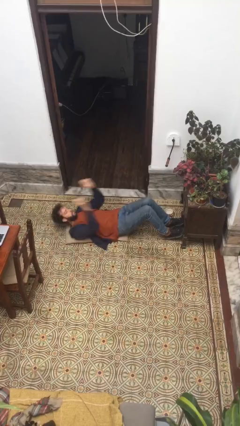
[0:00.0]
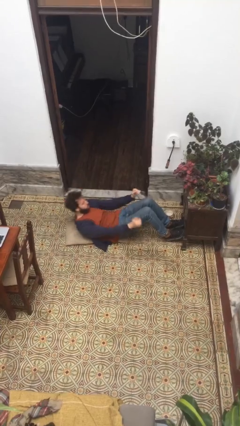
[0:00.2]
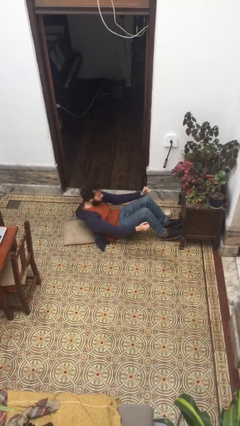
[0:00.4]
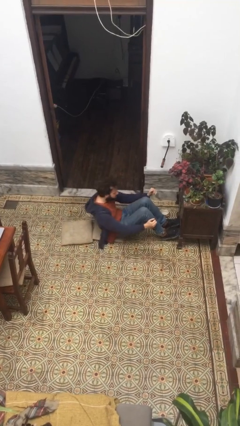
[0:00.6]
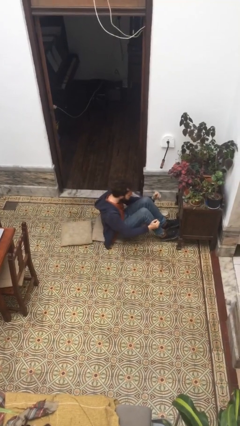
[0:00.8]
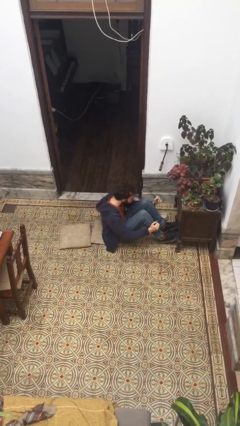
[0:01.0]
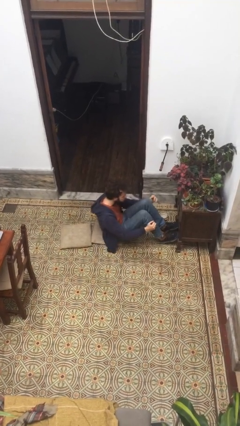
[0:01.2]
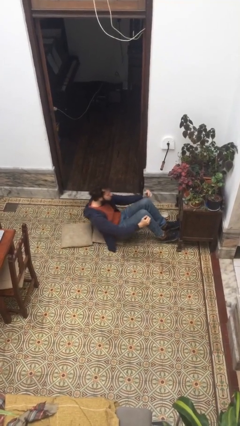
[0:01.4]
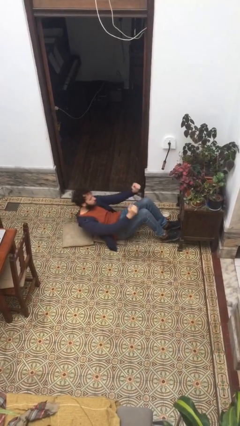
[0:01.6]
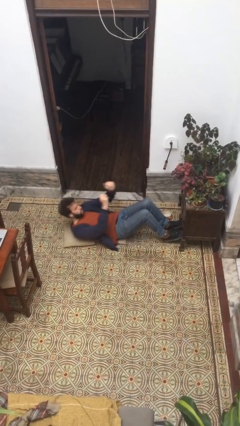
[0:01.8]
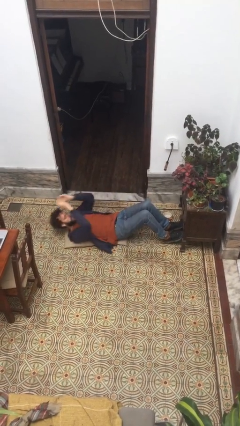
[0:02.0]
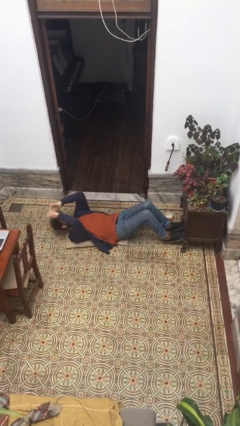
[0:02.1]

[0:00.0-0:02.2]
person exercises with situp

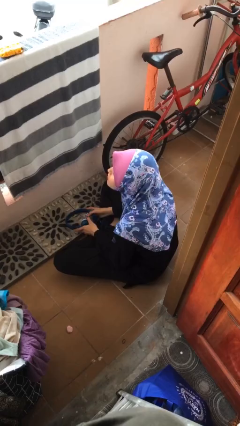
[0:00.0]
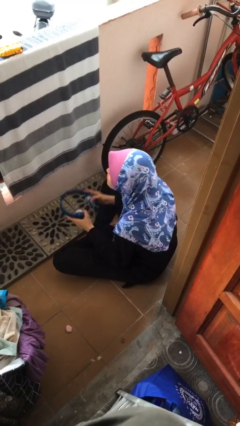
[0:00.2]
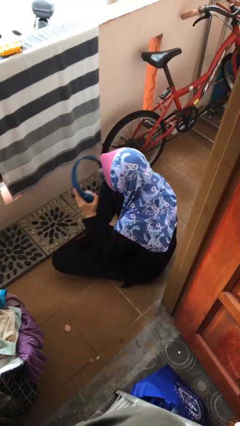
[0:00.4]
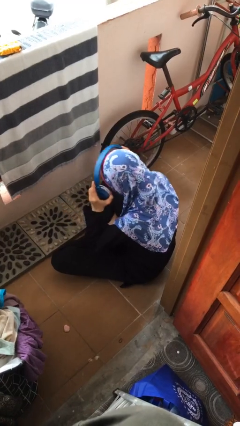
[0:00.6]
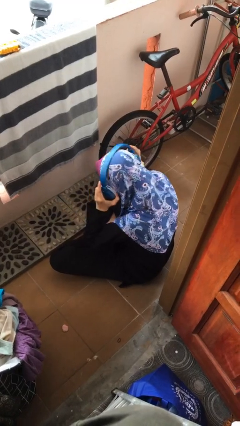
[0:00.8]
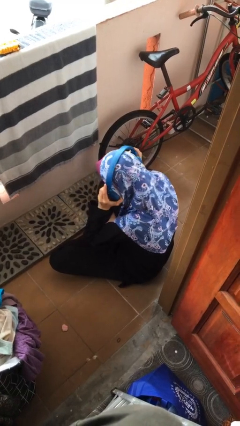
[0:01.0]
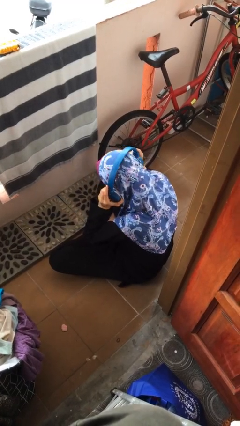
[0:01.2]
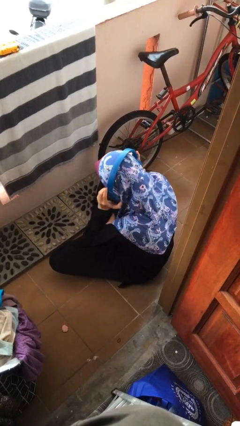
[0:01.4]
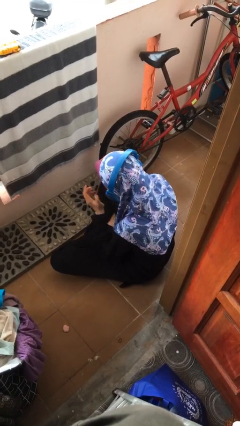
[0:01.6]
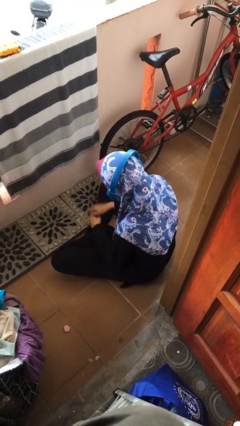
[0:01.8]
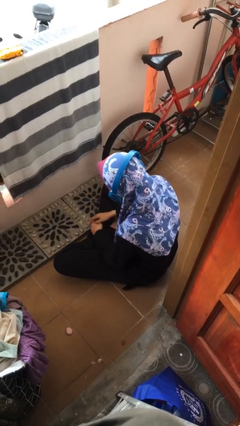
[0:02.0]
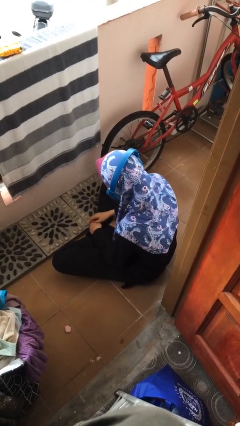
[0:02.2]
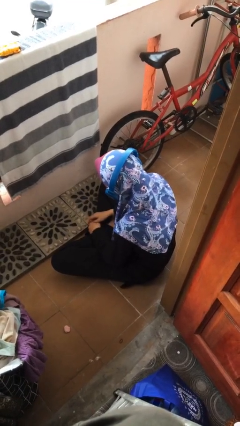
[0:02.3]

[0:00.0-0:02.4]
person puts on headphones

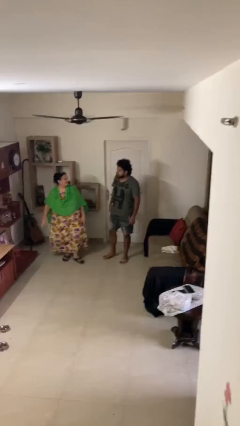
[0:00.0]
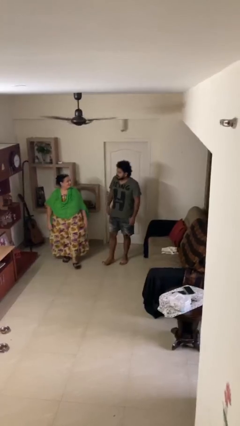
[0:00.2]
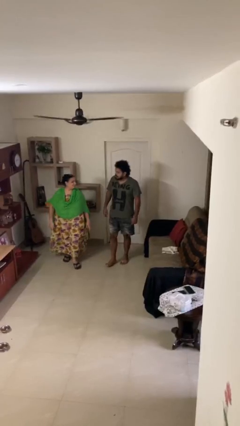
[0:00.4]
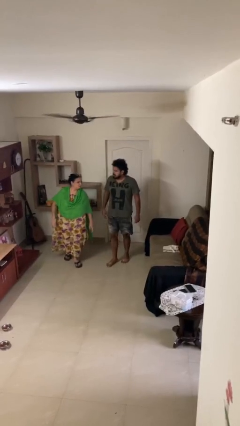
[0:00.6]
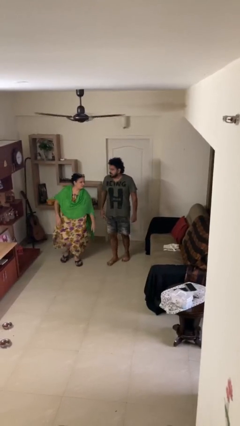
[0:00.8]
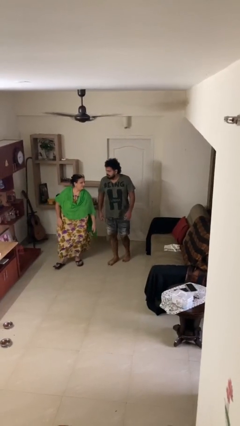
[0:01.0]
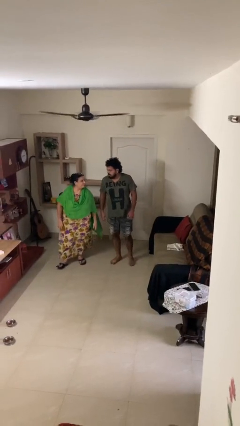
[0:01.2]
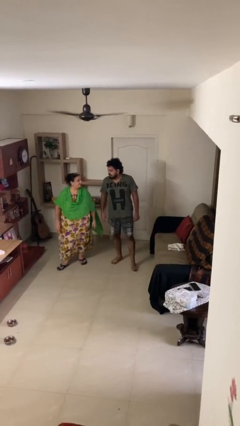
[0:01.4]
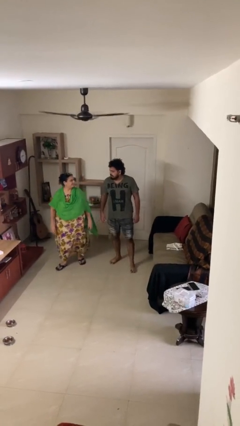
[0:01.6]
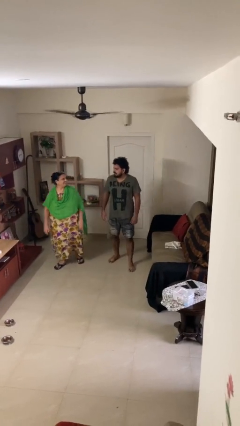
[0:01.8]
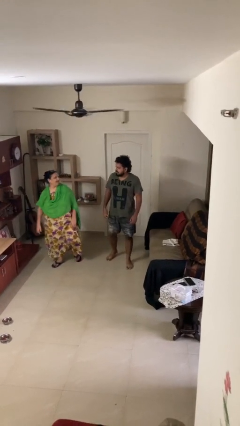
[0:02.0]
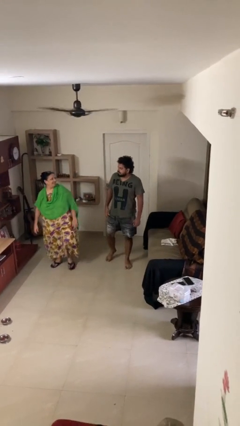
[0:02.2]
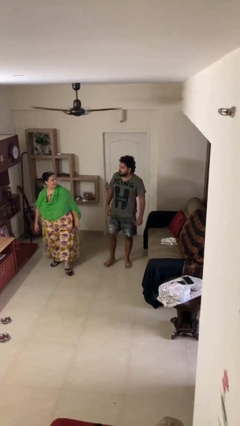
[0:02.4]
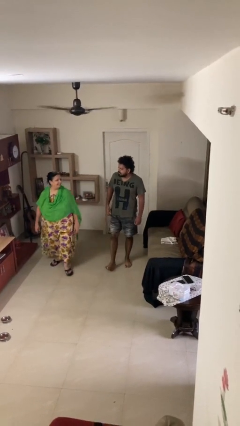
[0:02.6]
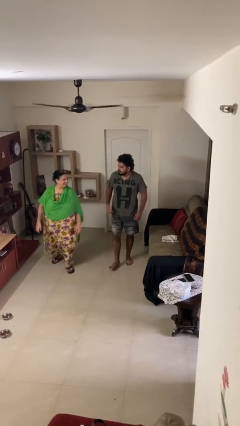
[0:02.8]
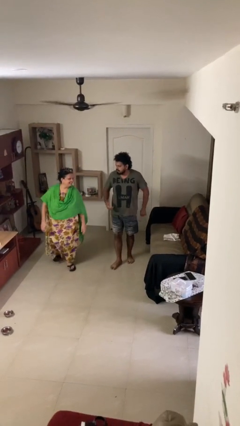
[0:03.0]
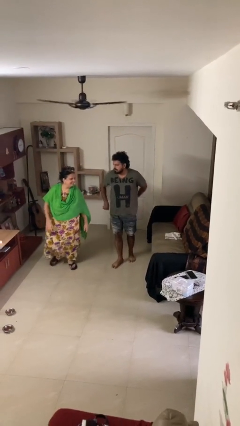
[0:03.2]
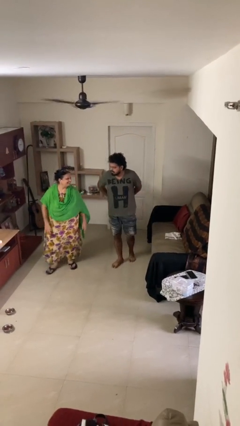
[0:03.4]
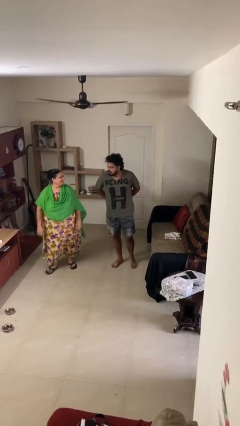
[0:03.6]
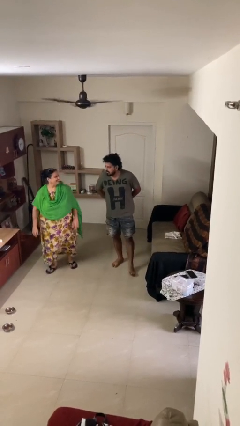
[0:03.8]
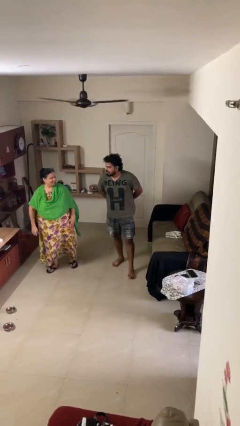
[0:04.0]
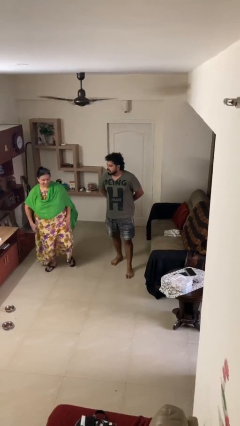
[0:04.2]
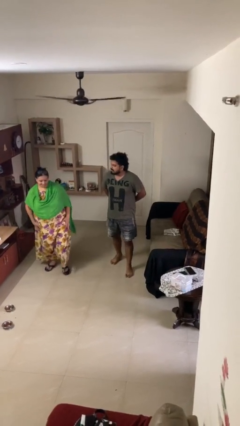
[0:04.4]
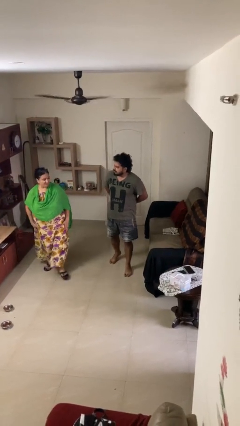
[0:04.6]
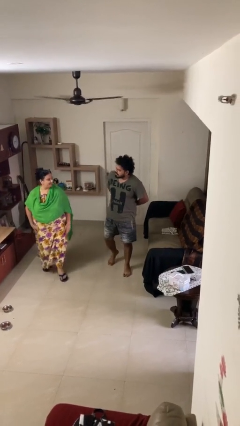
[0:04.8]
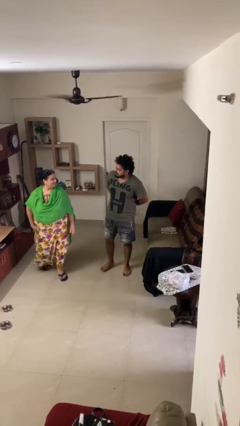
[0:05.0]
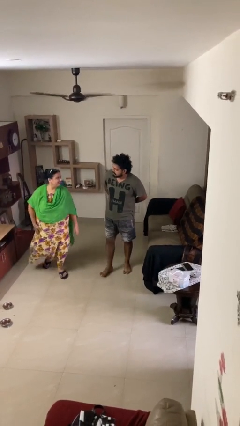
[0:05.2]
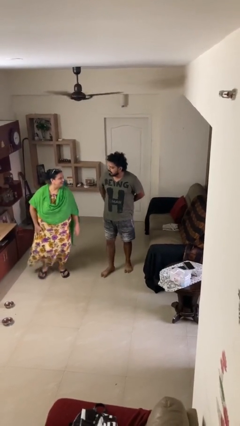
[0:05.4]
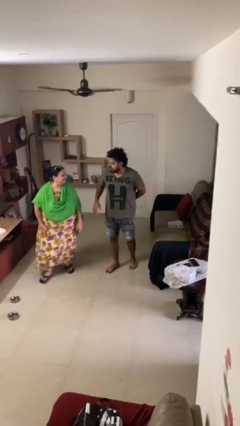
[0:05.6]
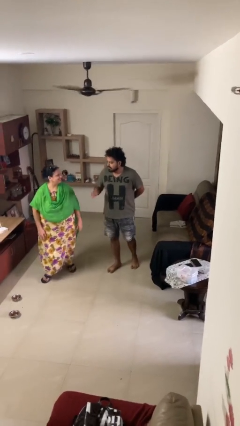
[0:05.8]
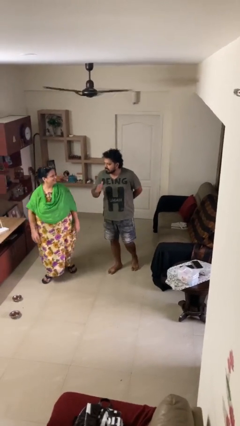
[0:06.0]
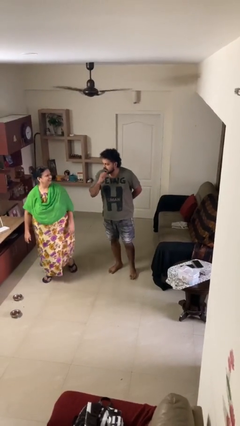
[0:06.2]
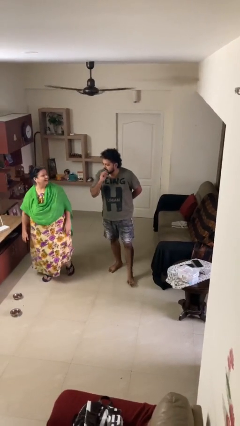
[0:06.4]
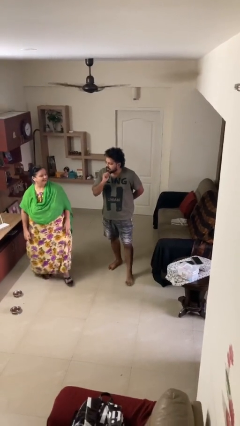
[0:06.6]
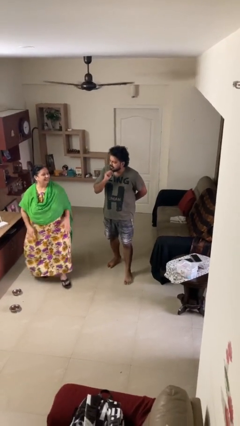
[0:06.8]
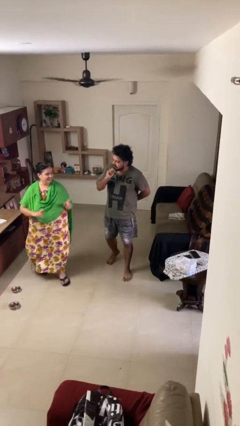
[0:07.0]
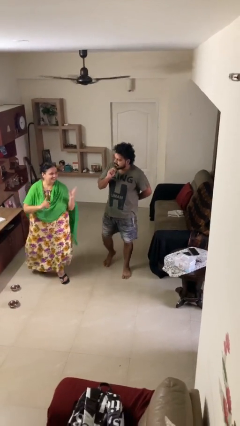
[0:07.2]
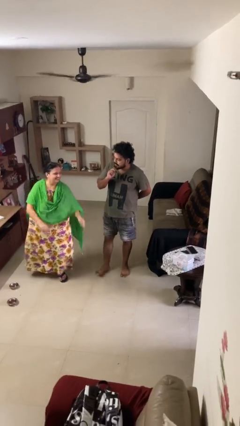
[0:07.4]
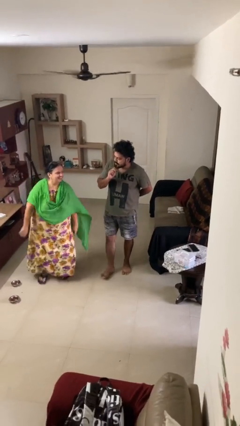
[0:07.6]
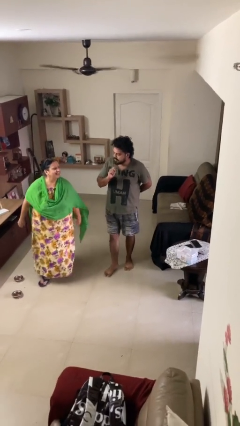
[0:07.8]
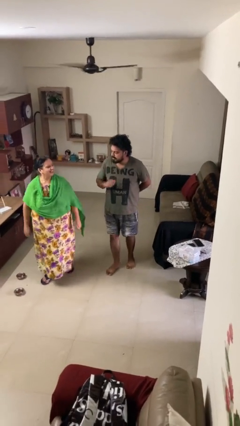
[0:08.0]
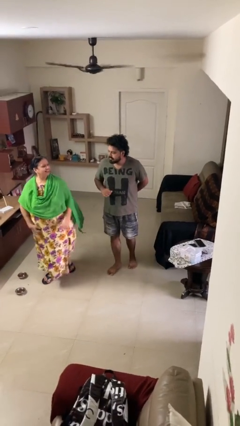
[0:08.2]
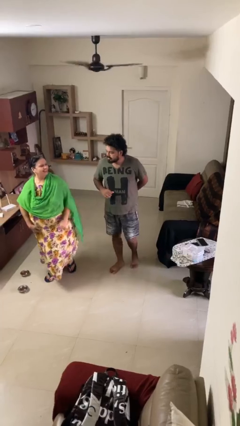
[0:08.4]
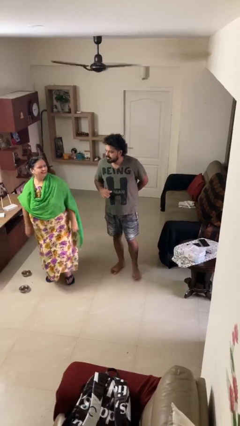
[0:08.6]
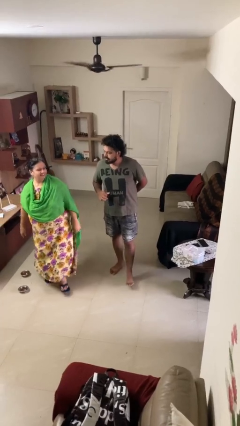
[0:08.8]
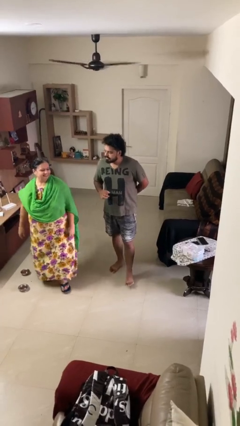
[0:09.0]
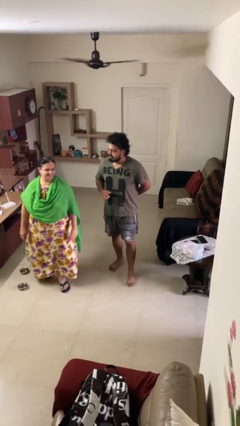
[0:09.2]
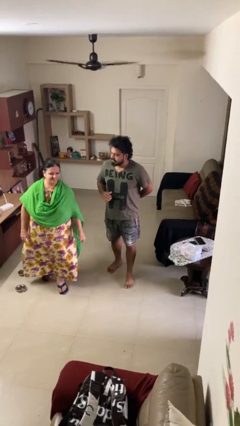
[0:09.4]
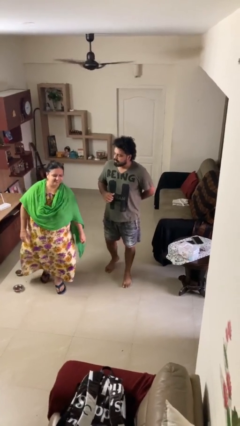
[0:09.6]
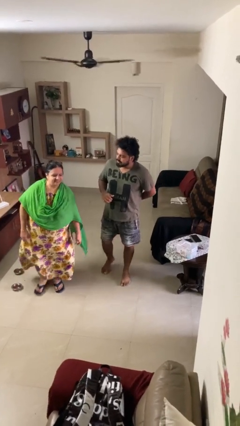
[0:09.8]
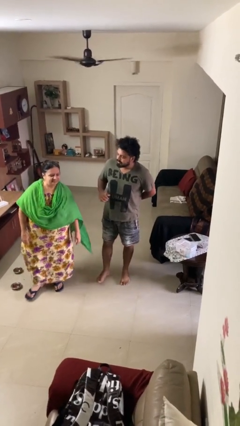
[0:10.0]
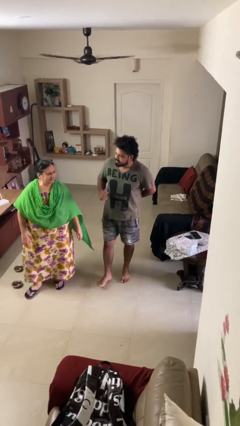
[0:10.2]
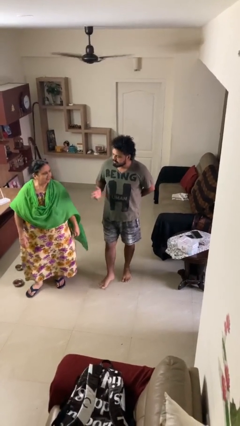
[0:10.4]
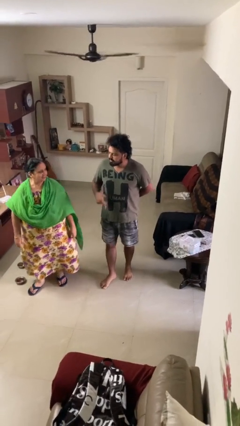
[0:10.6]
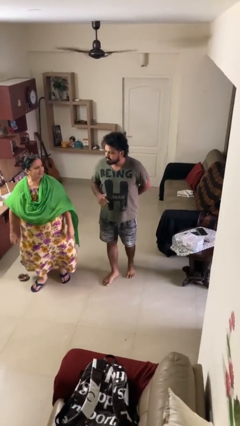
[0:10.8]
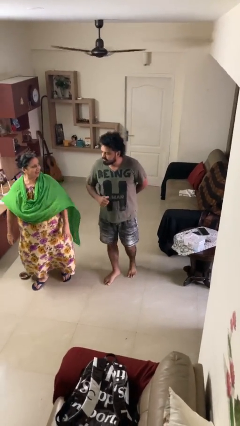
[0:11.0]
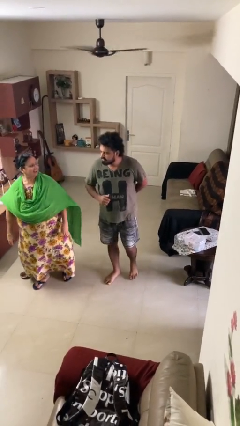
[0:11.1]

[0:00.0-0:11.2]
person talks to person

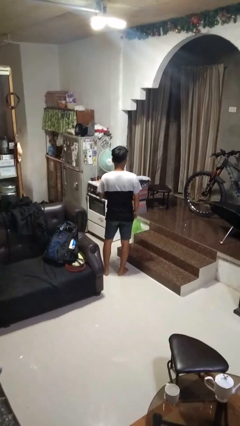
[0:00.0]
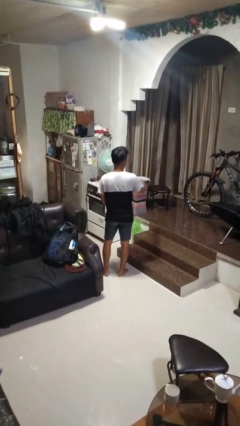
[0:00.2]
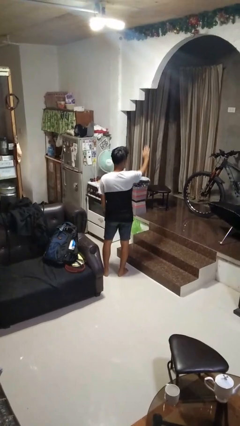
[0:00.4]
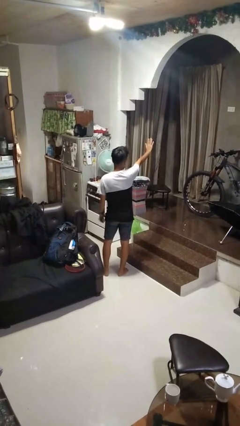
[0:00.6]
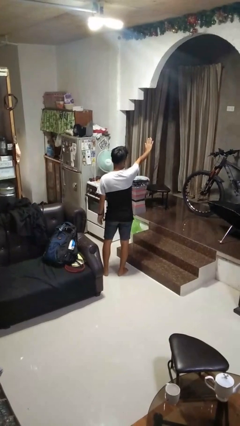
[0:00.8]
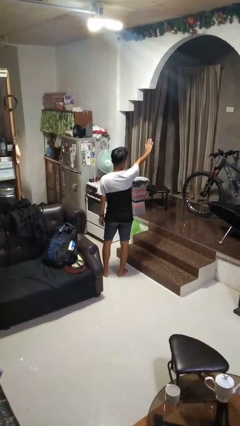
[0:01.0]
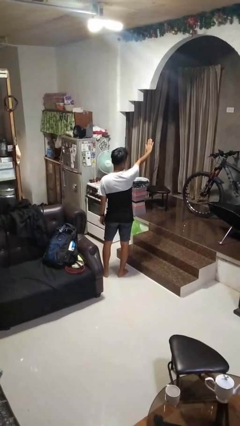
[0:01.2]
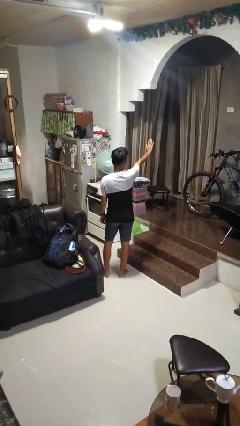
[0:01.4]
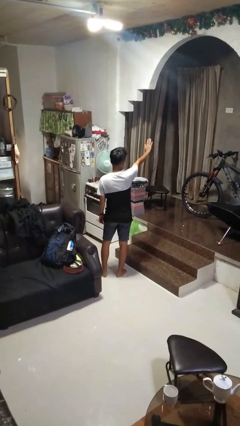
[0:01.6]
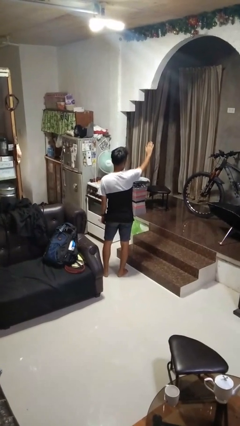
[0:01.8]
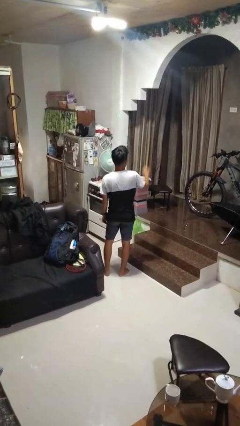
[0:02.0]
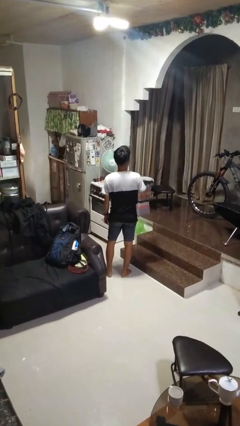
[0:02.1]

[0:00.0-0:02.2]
person gestures stop
